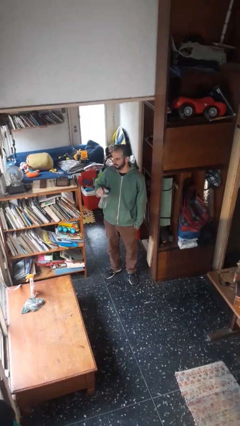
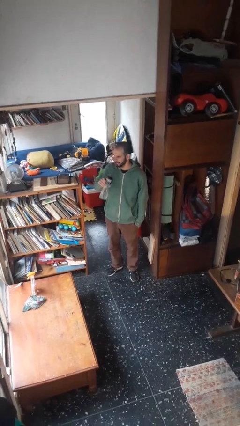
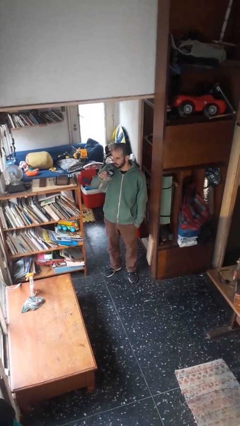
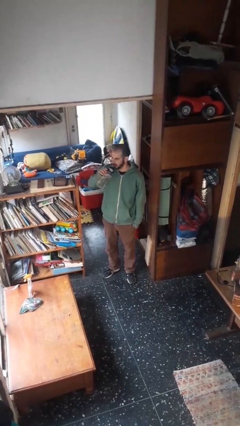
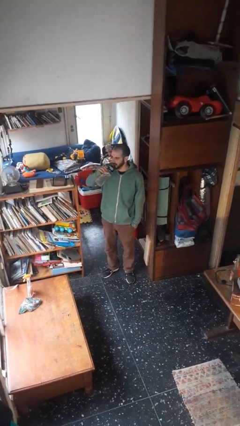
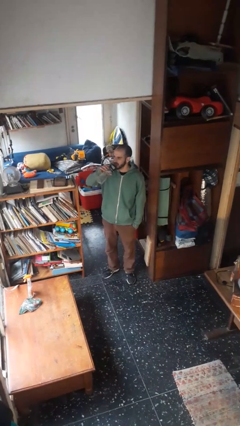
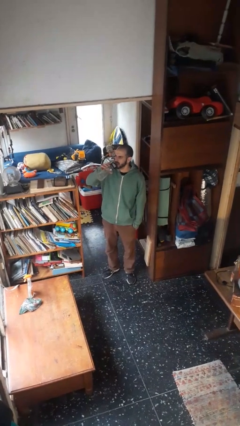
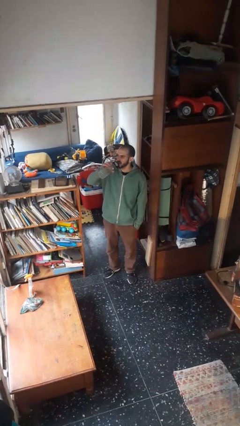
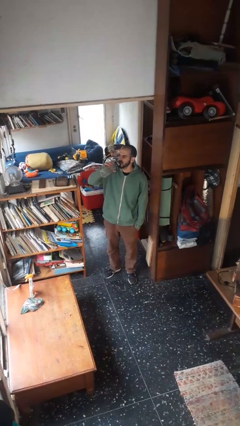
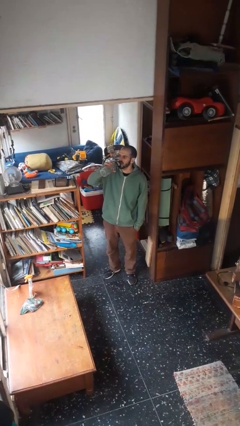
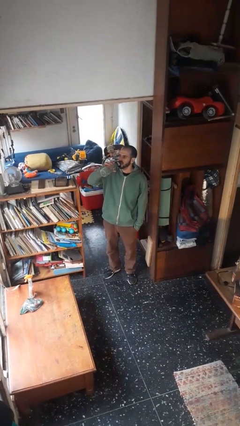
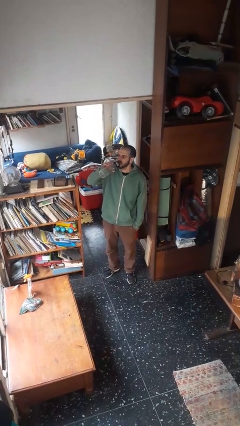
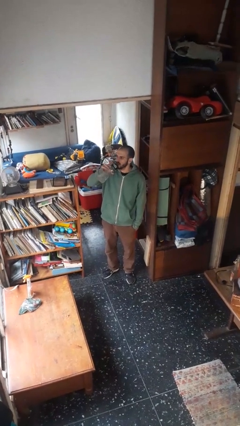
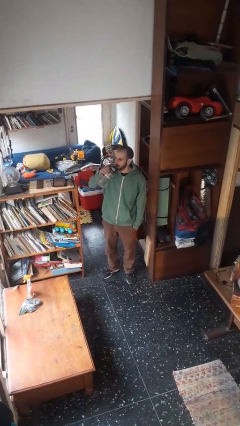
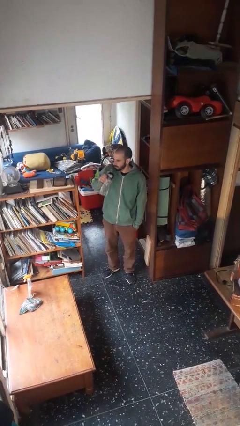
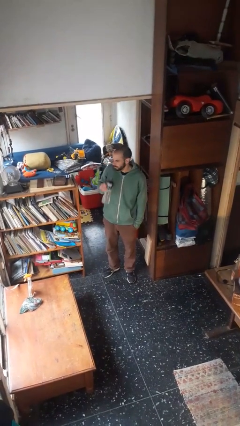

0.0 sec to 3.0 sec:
person drinks from bottle

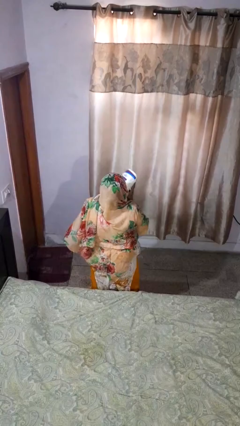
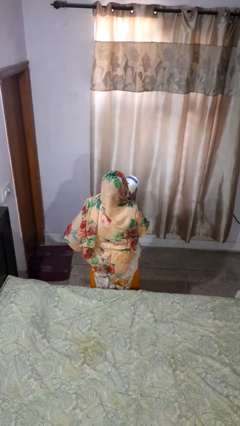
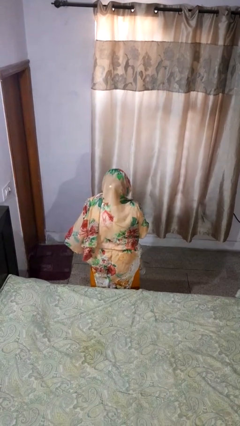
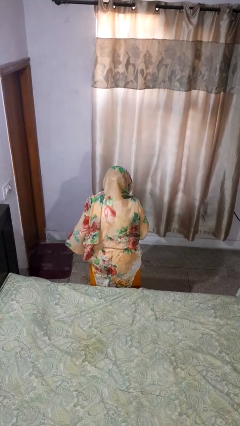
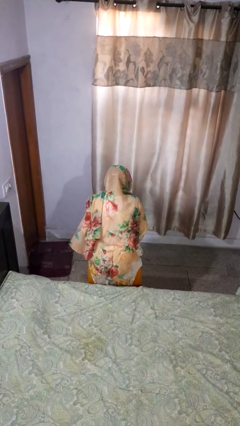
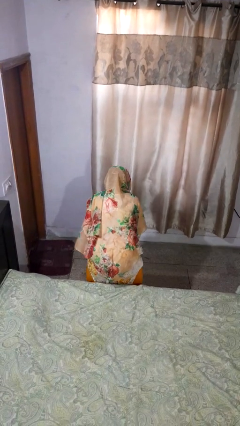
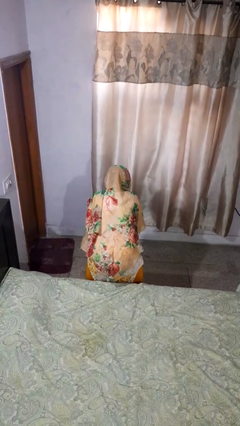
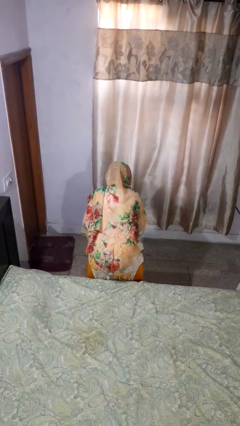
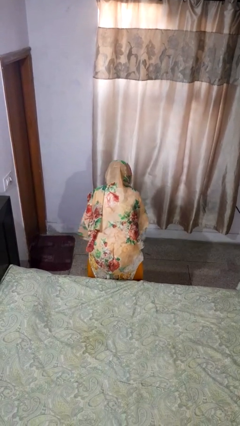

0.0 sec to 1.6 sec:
person catches dropped object

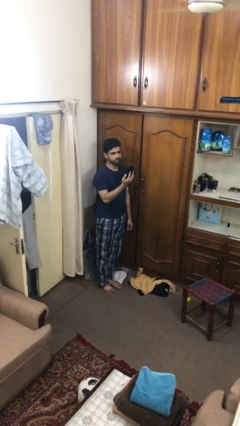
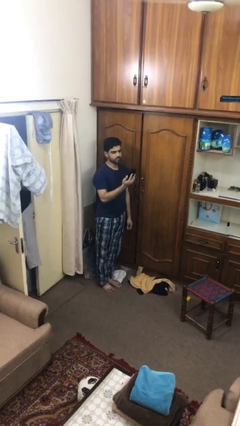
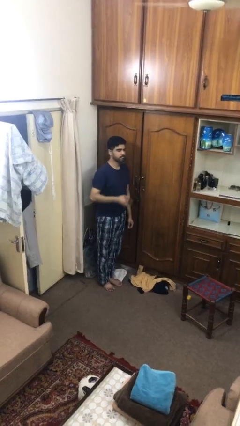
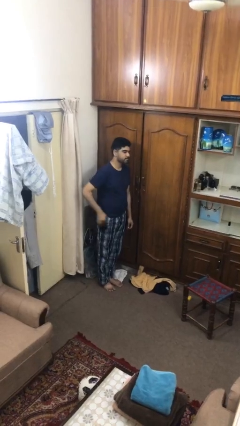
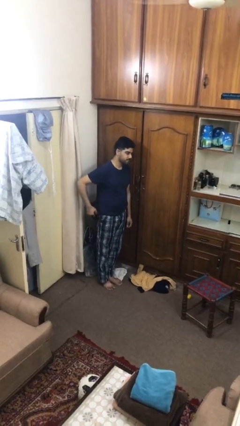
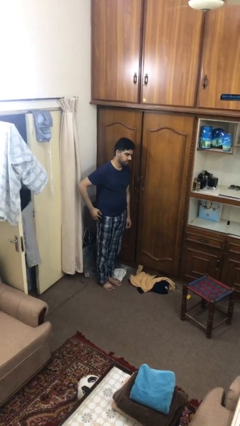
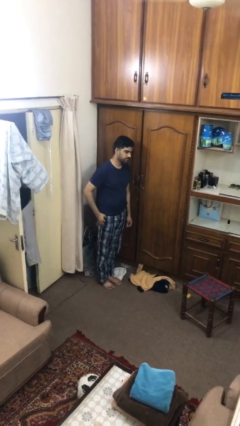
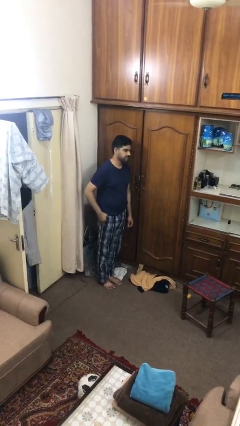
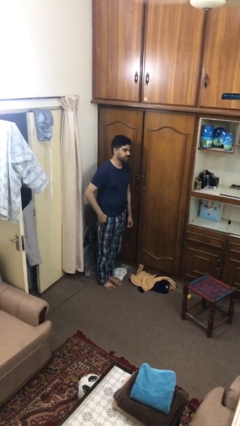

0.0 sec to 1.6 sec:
person puts phone into pocket

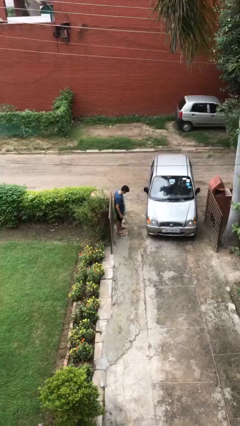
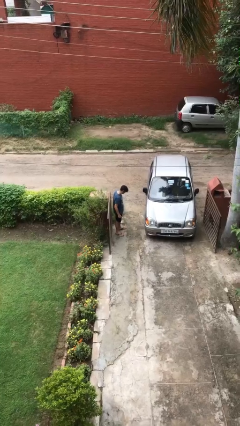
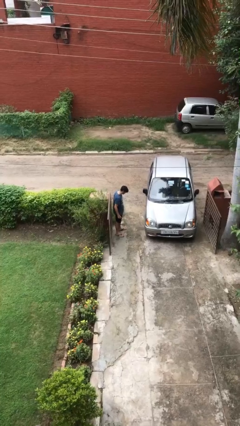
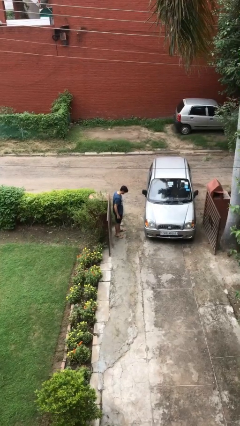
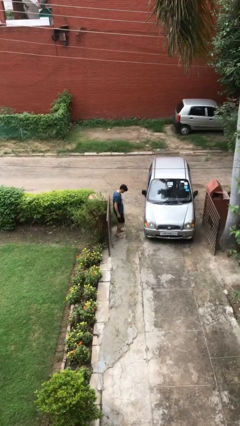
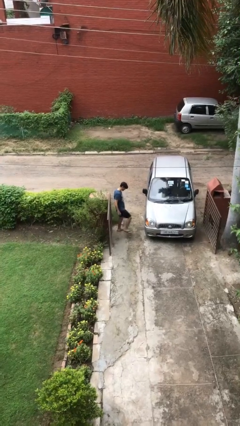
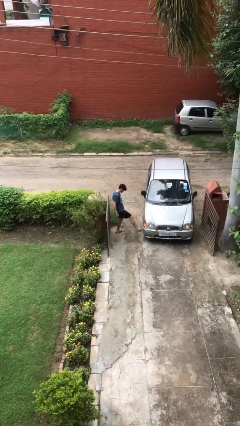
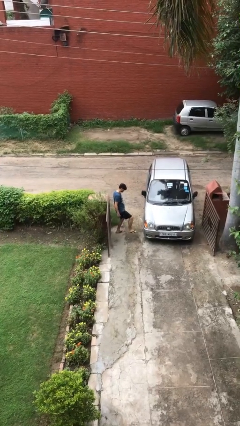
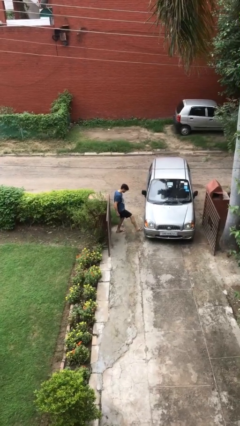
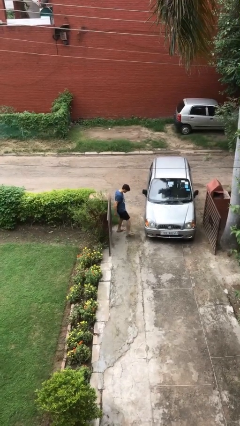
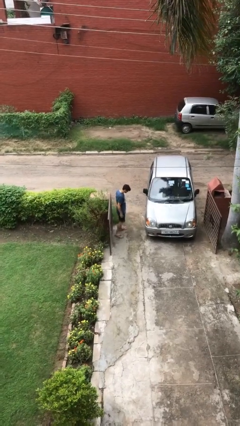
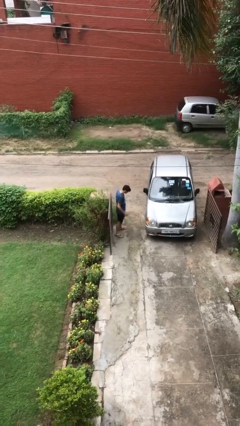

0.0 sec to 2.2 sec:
person kicks car tires

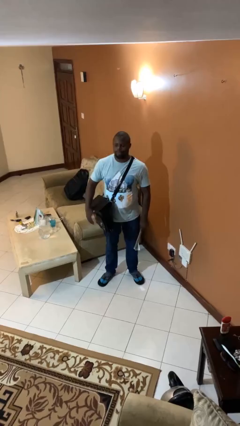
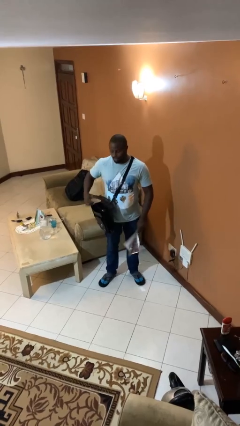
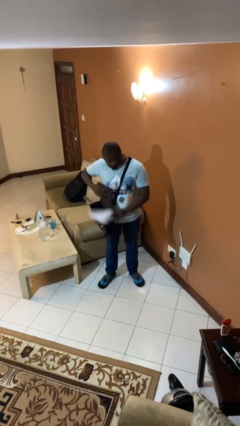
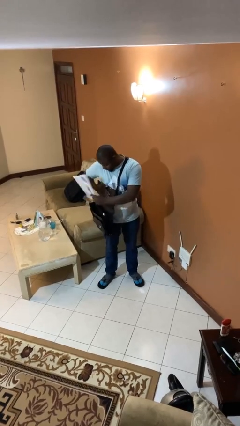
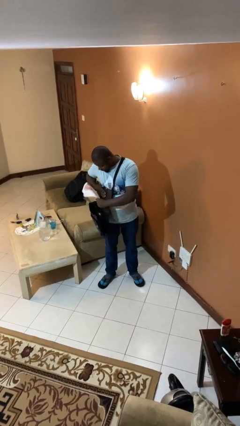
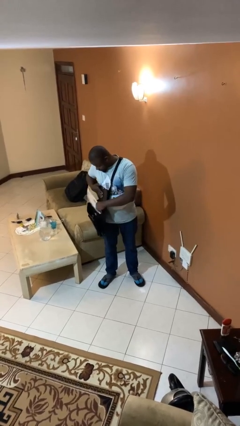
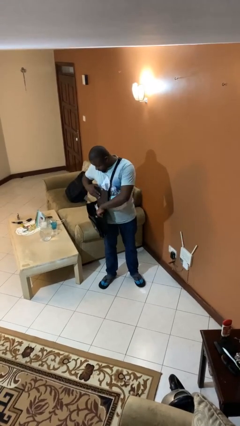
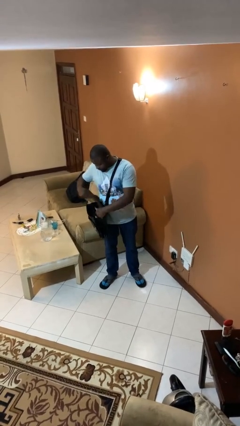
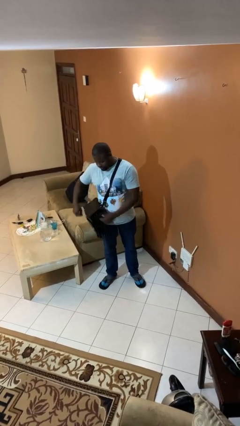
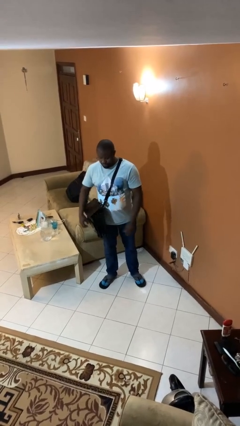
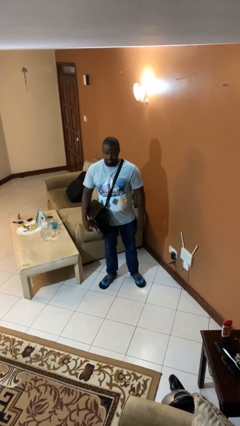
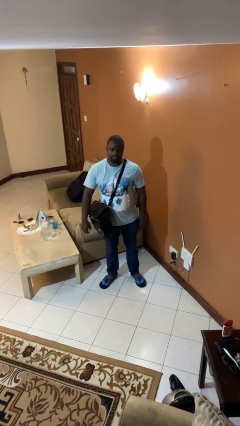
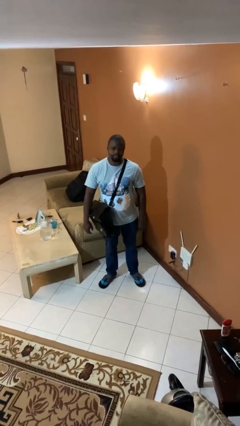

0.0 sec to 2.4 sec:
person puts object into purse

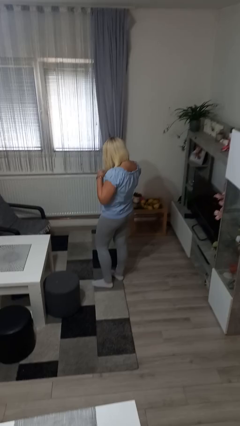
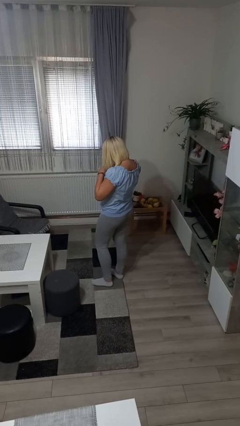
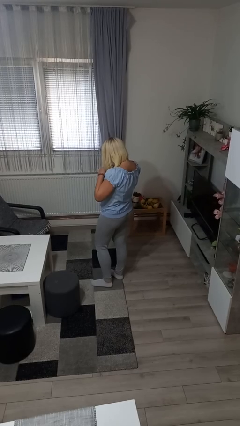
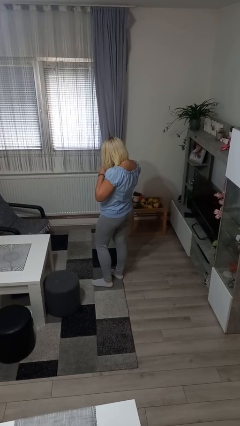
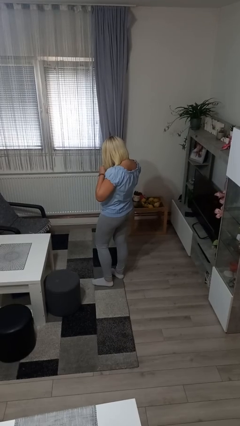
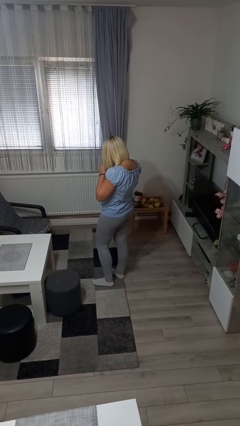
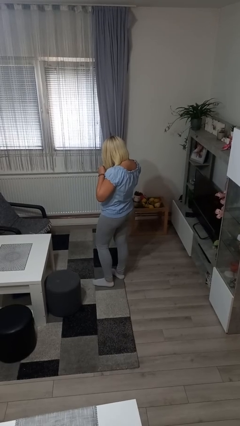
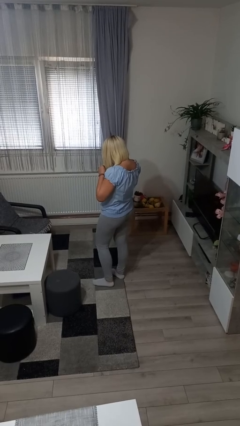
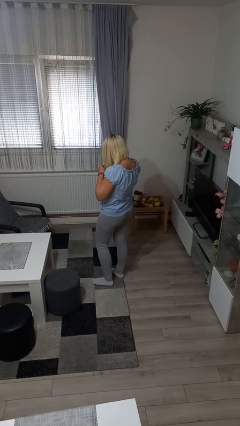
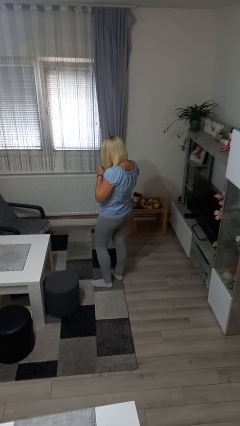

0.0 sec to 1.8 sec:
person unbuttons shirt

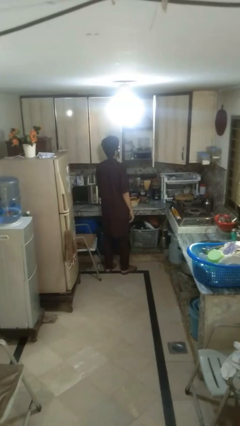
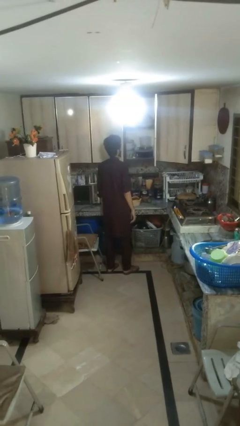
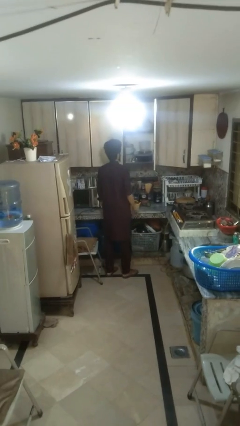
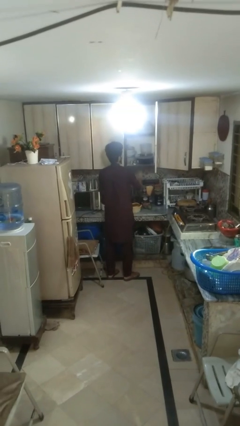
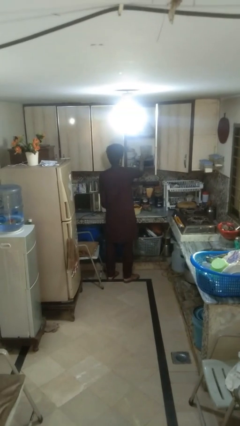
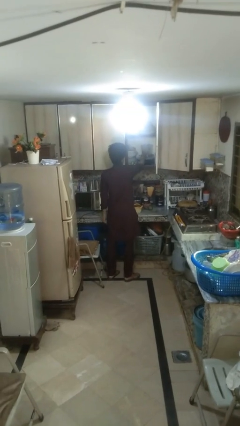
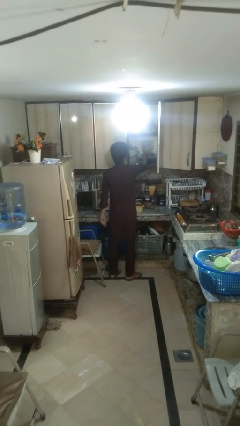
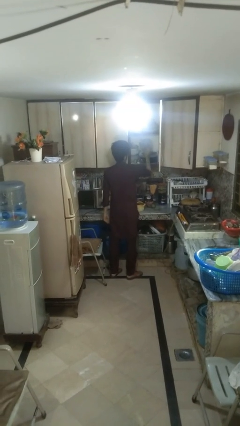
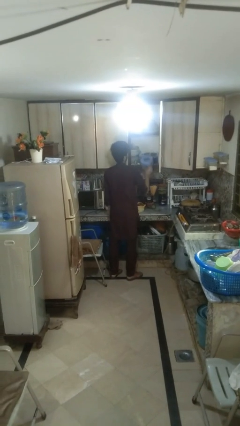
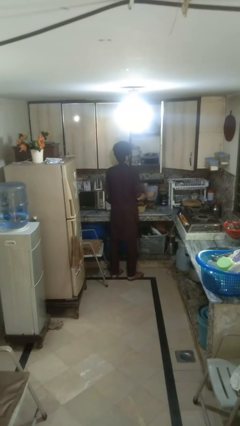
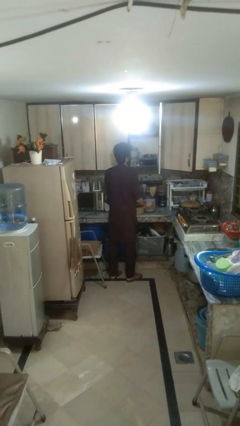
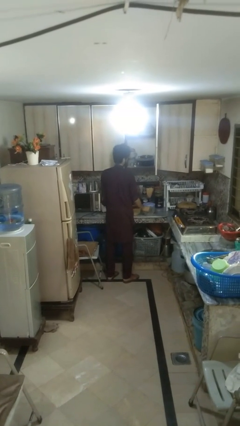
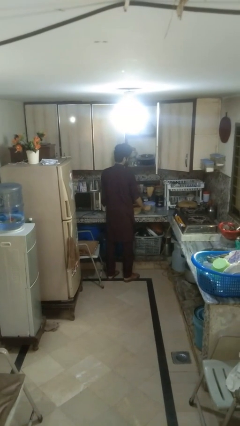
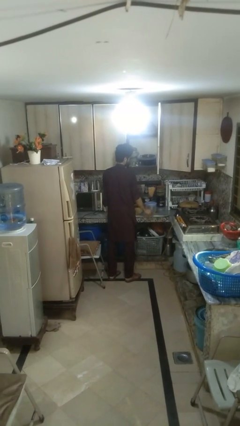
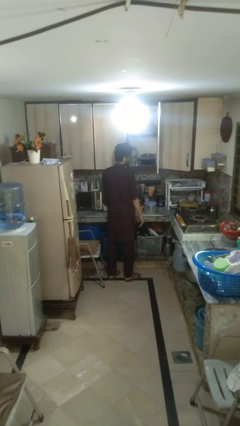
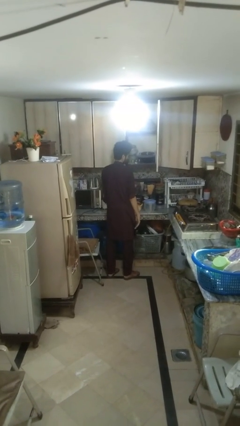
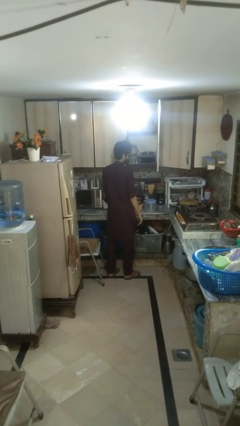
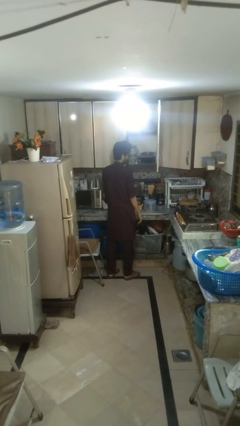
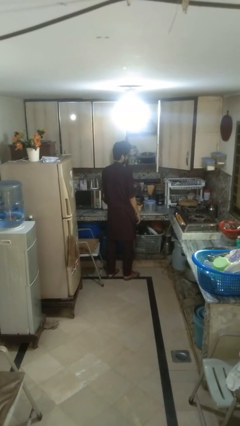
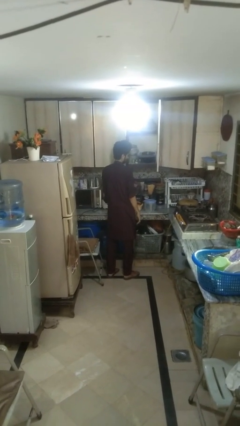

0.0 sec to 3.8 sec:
person takes object from cabinet

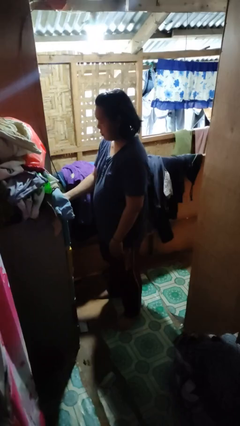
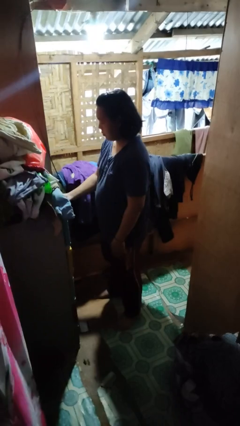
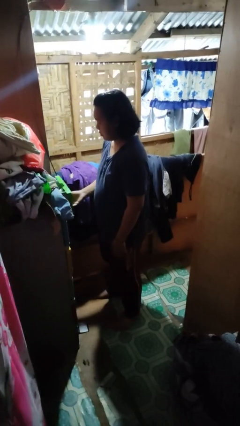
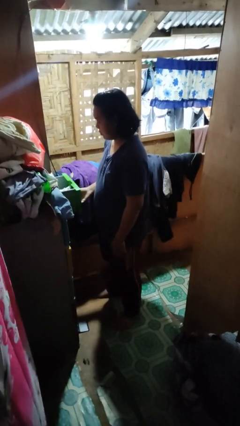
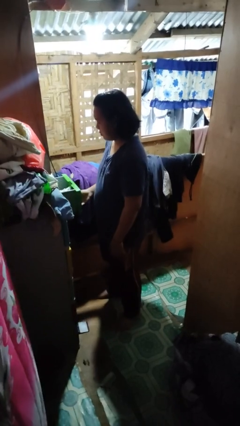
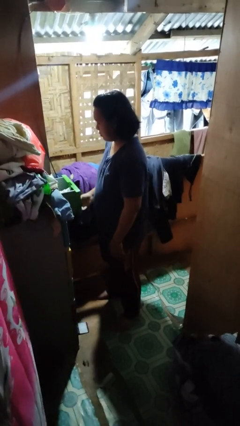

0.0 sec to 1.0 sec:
person opens dresser drawer
